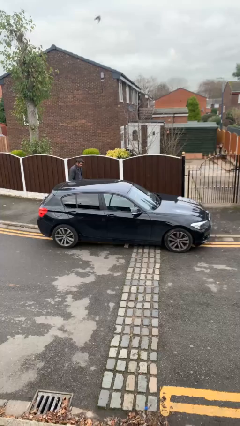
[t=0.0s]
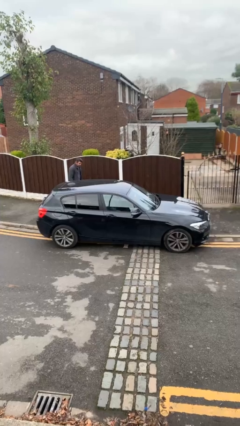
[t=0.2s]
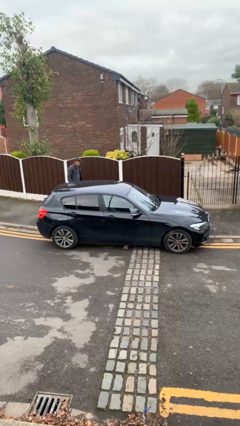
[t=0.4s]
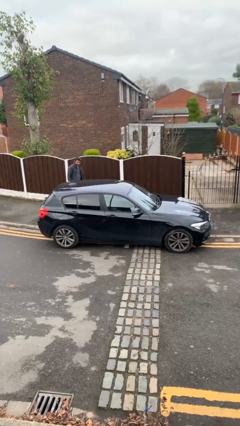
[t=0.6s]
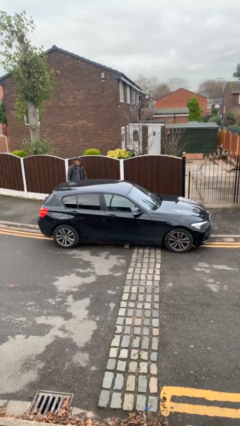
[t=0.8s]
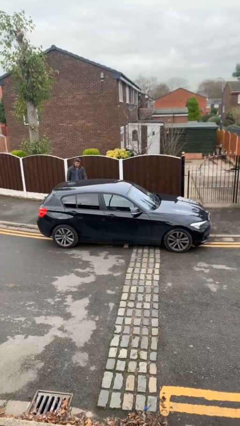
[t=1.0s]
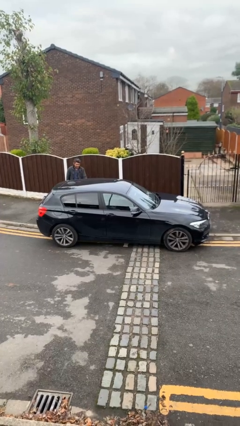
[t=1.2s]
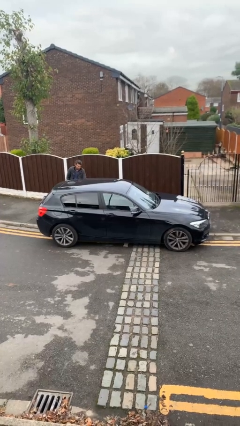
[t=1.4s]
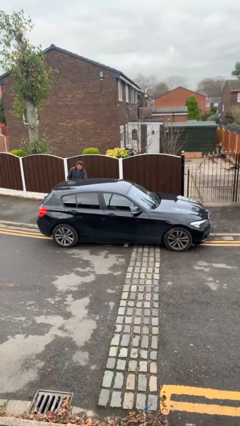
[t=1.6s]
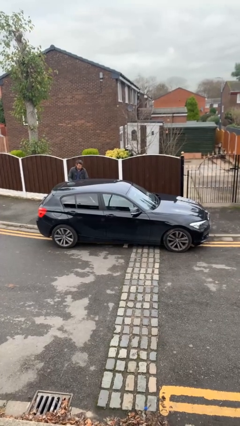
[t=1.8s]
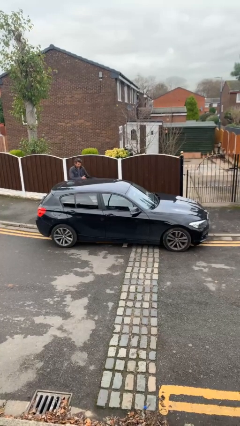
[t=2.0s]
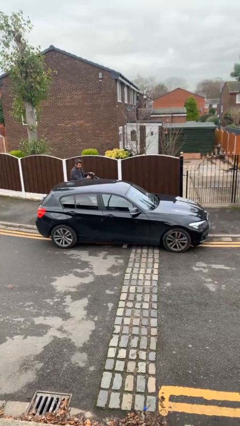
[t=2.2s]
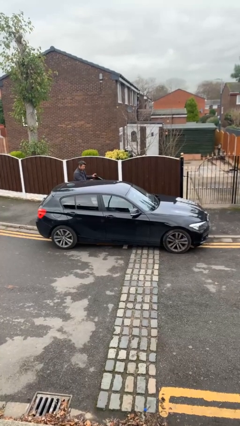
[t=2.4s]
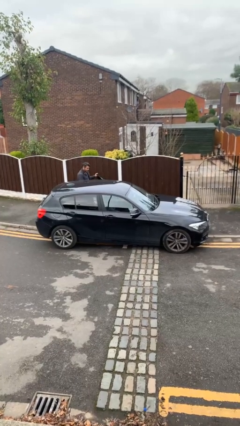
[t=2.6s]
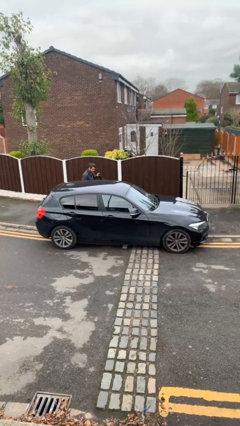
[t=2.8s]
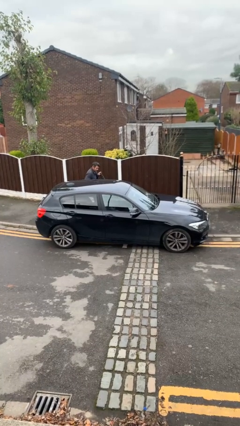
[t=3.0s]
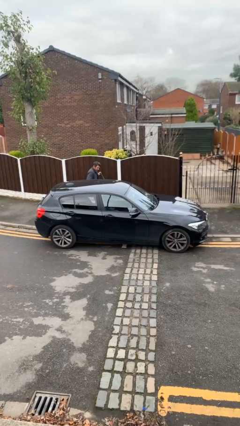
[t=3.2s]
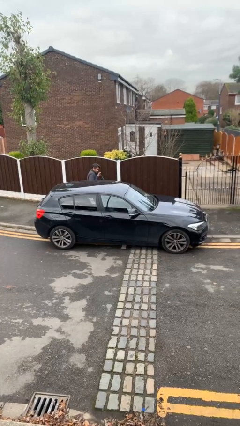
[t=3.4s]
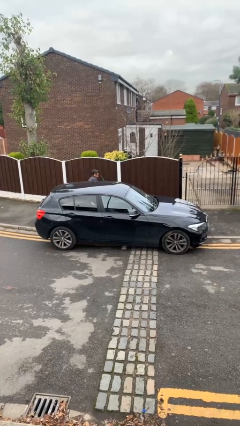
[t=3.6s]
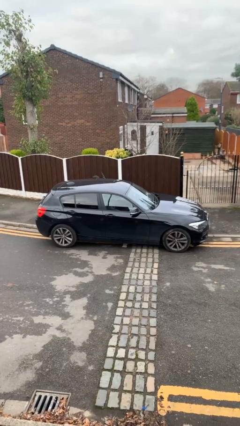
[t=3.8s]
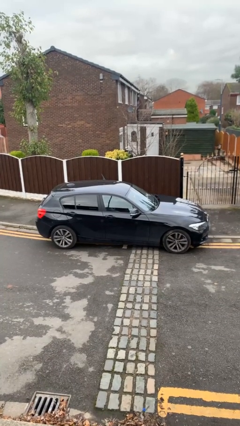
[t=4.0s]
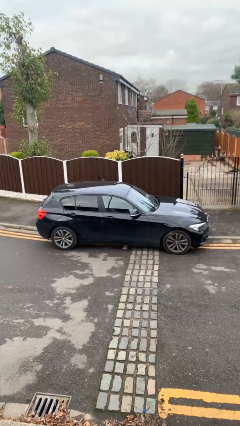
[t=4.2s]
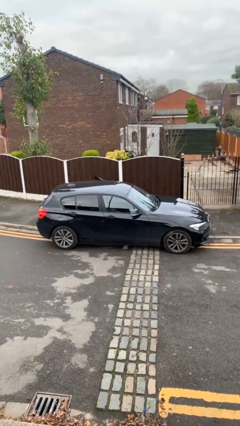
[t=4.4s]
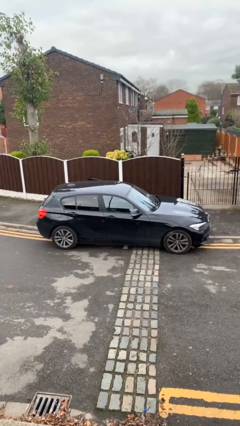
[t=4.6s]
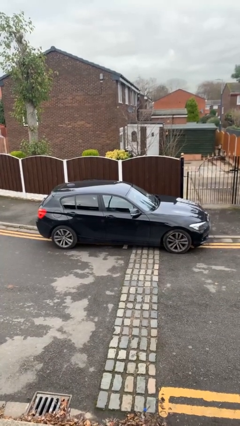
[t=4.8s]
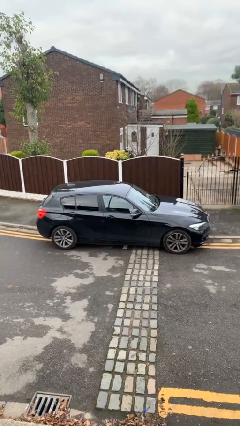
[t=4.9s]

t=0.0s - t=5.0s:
car picks up person

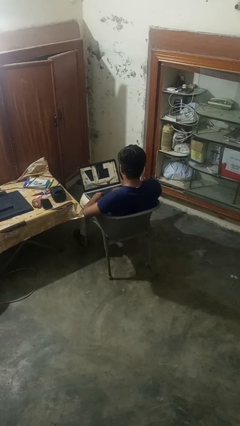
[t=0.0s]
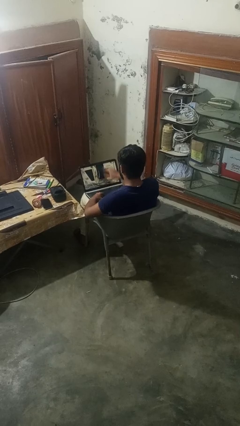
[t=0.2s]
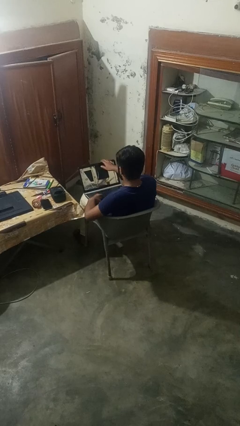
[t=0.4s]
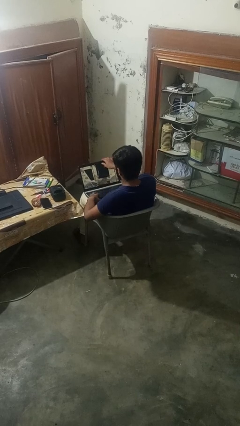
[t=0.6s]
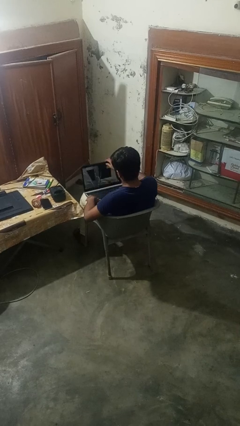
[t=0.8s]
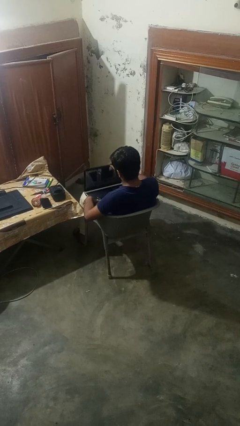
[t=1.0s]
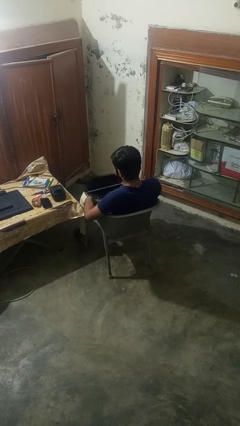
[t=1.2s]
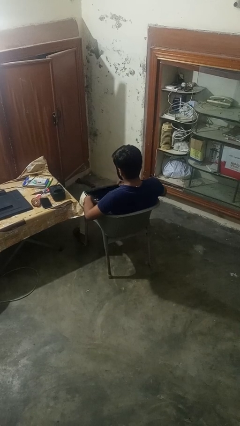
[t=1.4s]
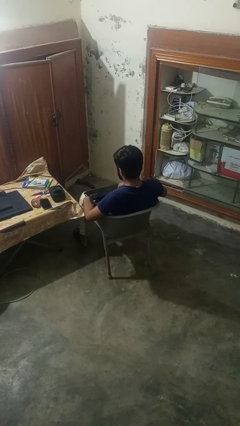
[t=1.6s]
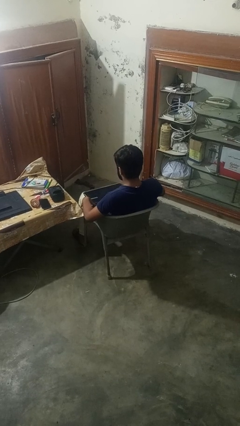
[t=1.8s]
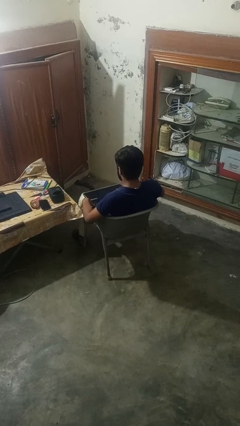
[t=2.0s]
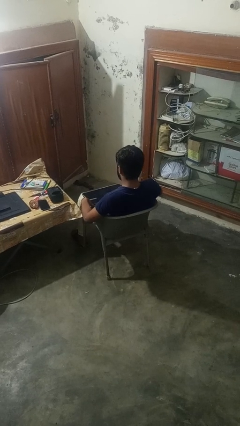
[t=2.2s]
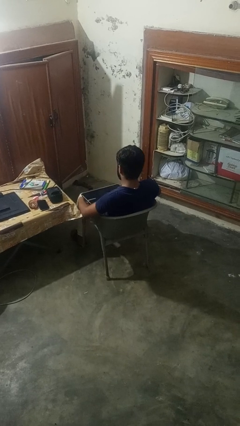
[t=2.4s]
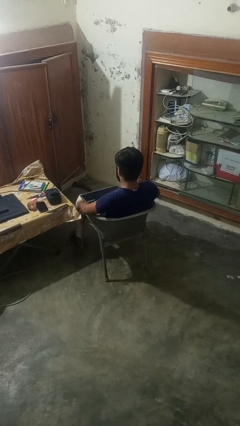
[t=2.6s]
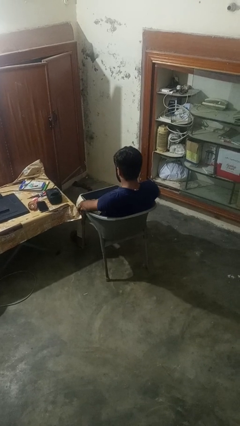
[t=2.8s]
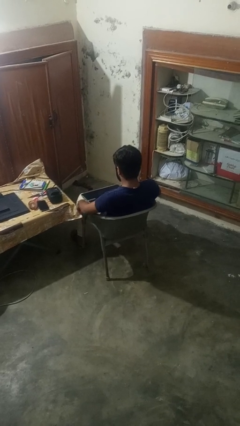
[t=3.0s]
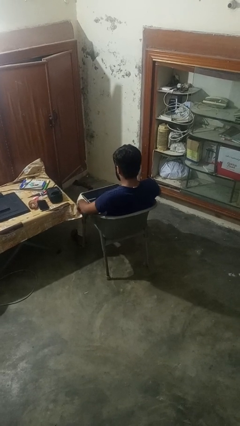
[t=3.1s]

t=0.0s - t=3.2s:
person closes laptop

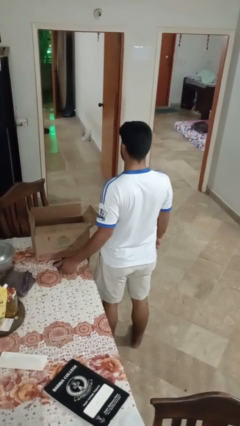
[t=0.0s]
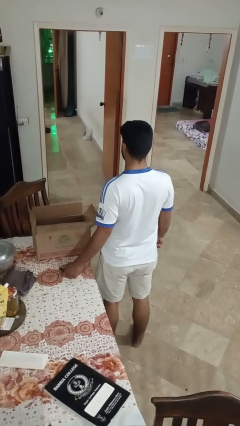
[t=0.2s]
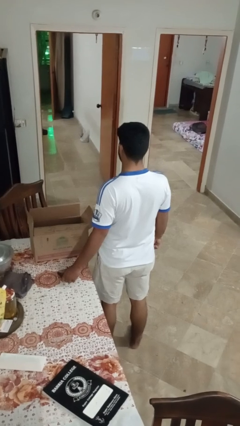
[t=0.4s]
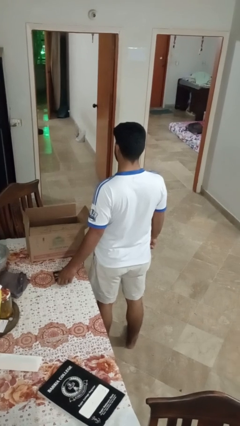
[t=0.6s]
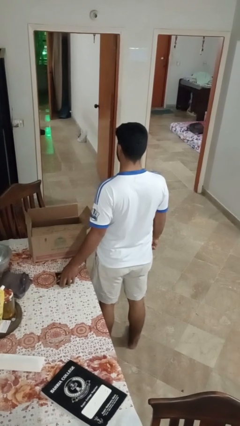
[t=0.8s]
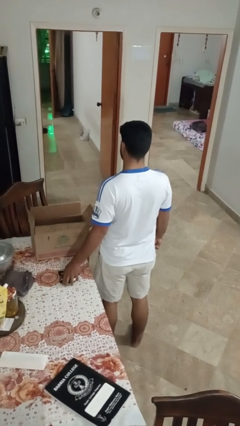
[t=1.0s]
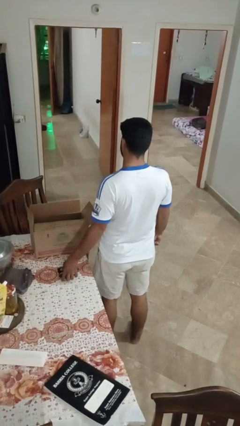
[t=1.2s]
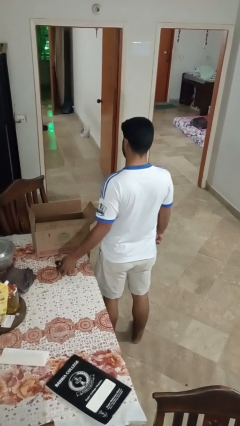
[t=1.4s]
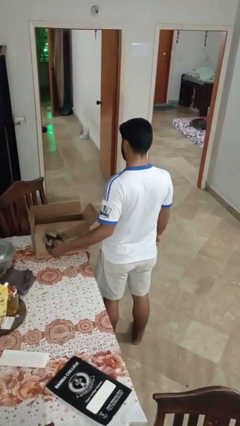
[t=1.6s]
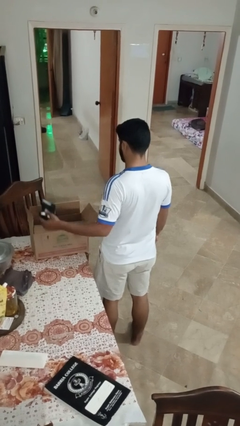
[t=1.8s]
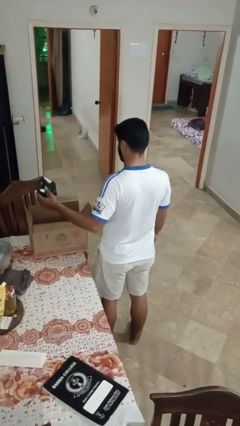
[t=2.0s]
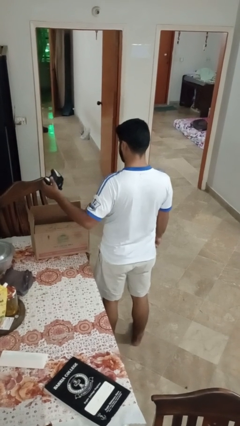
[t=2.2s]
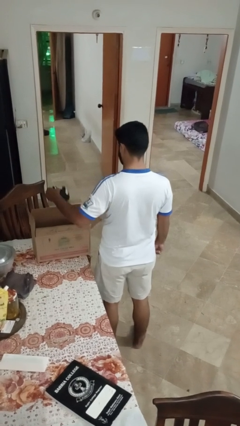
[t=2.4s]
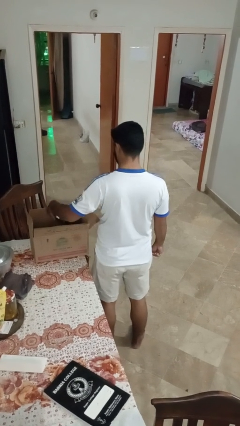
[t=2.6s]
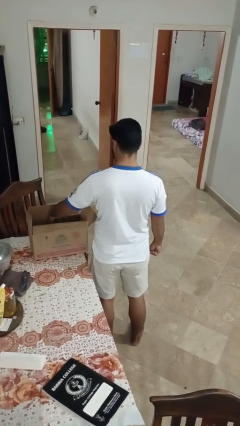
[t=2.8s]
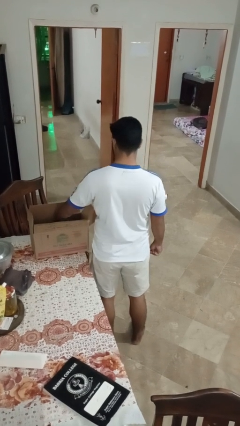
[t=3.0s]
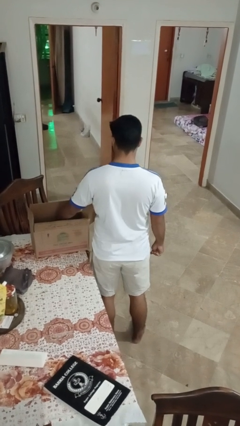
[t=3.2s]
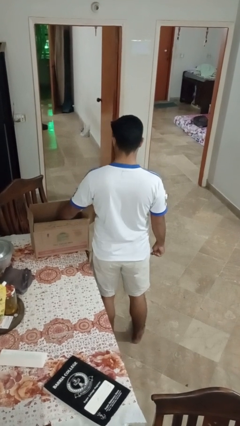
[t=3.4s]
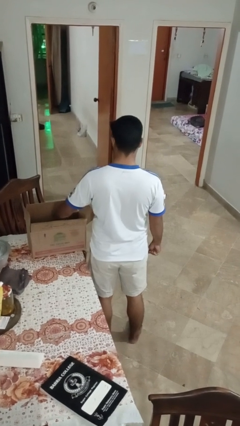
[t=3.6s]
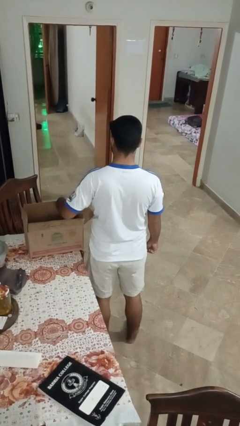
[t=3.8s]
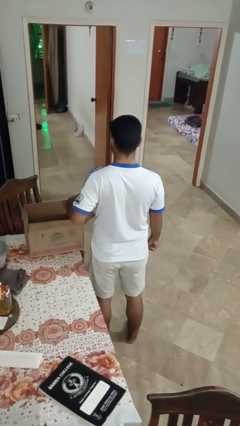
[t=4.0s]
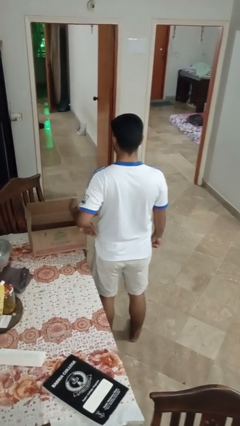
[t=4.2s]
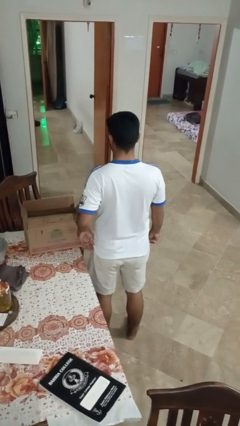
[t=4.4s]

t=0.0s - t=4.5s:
person puts object into box

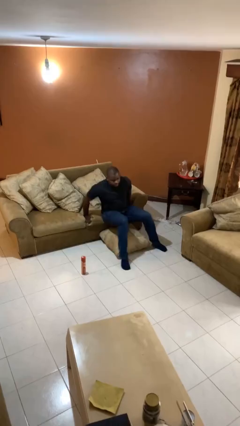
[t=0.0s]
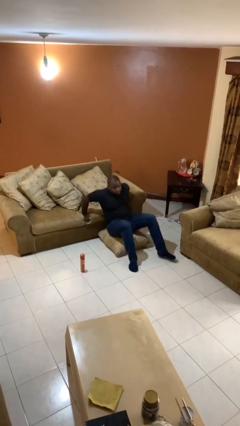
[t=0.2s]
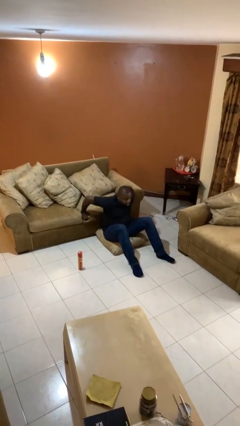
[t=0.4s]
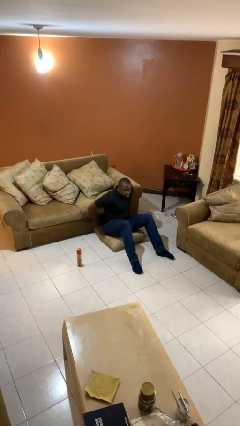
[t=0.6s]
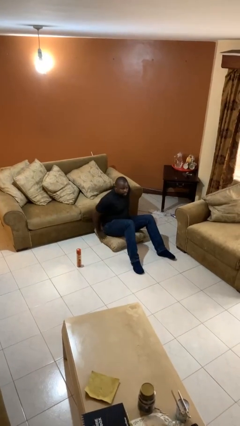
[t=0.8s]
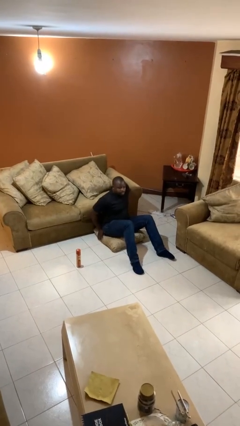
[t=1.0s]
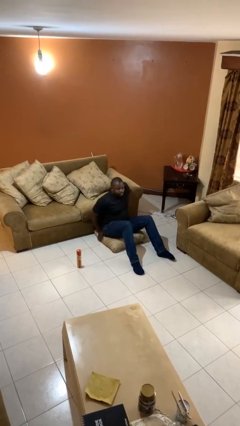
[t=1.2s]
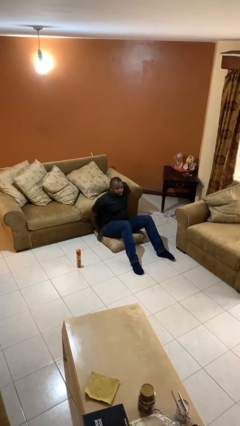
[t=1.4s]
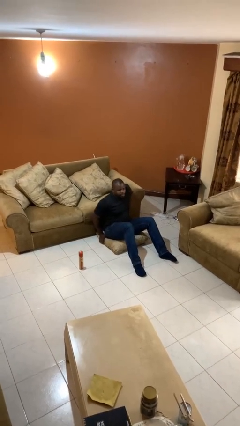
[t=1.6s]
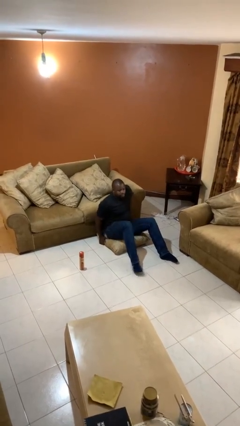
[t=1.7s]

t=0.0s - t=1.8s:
person falls from chair

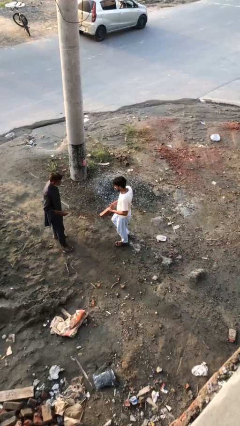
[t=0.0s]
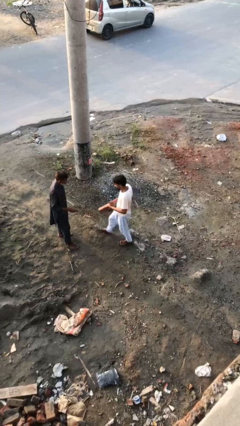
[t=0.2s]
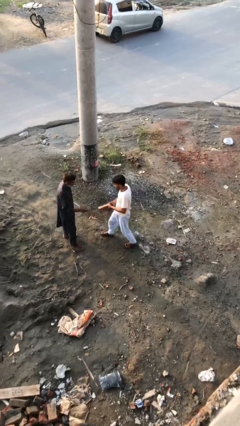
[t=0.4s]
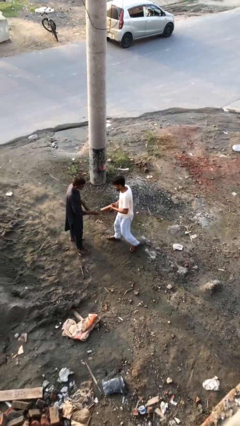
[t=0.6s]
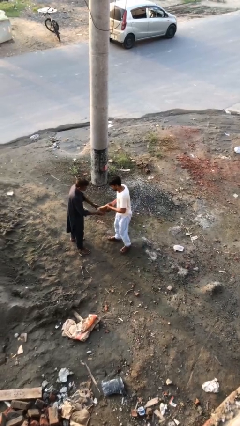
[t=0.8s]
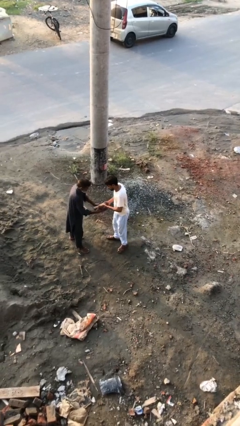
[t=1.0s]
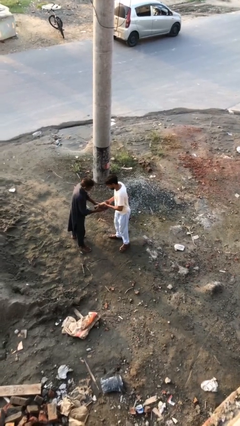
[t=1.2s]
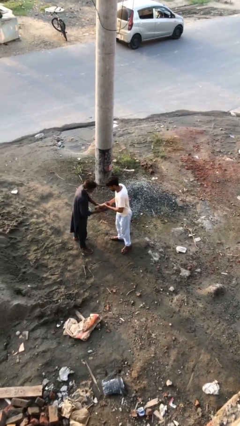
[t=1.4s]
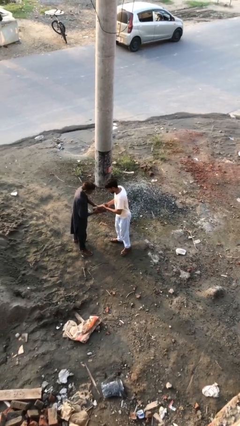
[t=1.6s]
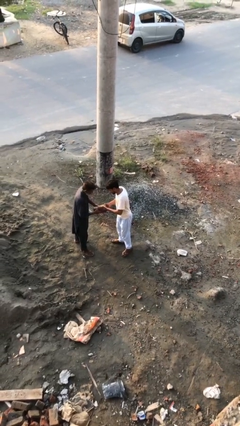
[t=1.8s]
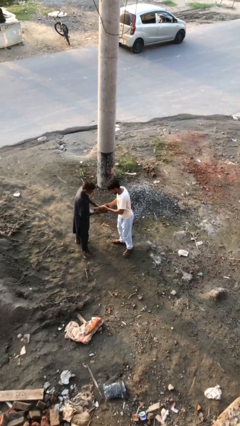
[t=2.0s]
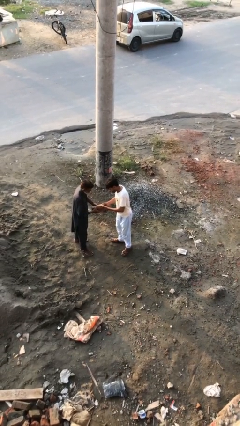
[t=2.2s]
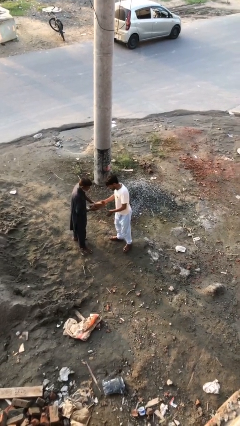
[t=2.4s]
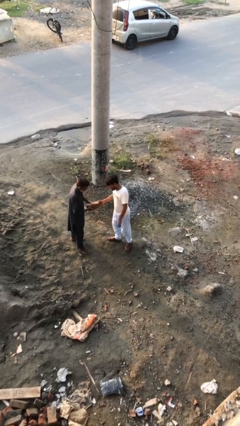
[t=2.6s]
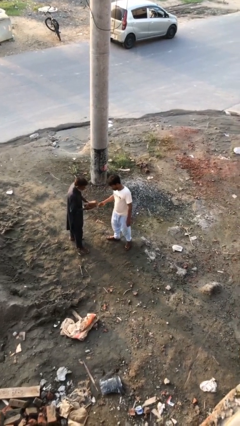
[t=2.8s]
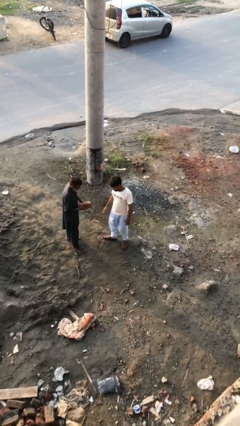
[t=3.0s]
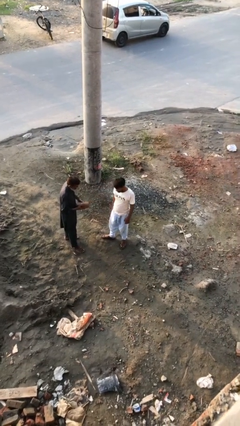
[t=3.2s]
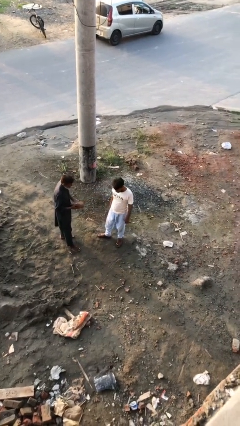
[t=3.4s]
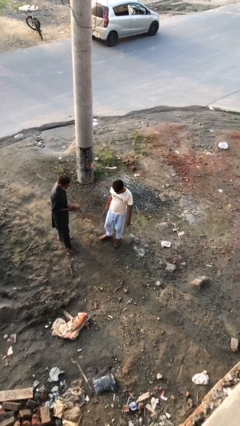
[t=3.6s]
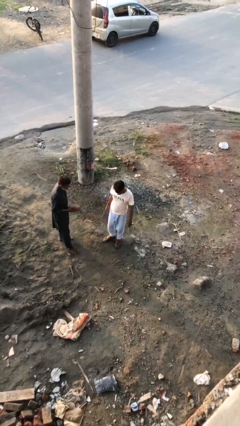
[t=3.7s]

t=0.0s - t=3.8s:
person transfers object to person
